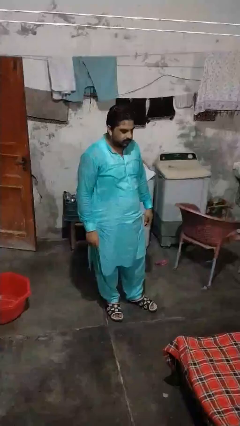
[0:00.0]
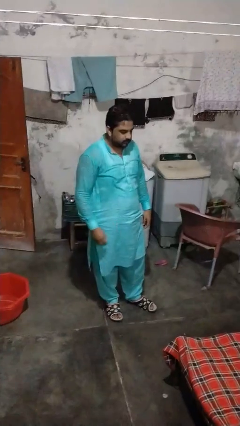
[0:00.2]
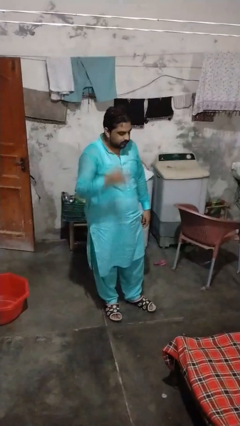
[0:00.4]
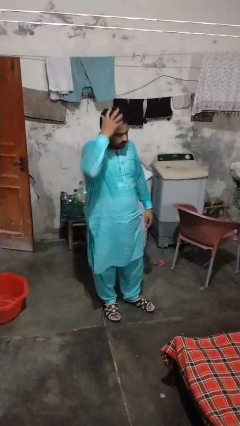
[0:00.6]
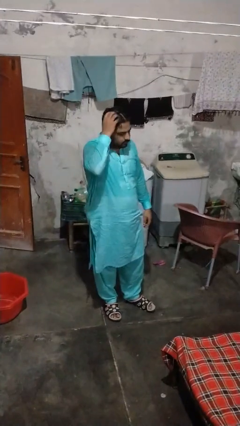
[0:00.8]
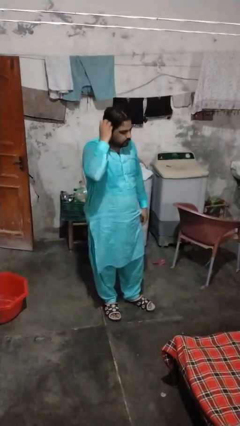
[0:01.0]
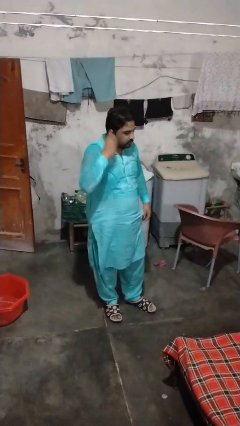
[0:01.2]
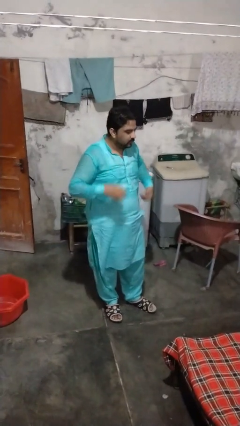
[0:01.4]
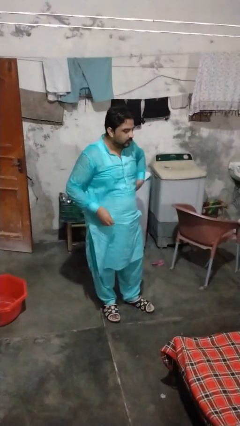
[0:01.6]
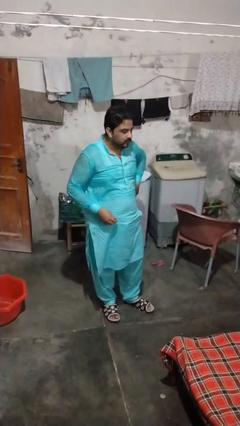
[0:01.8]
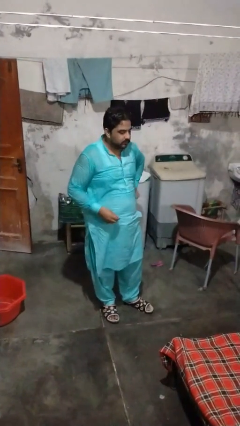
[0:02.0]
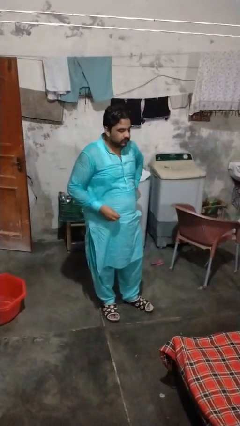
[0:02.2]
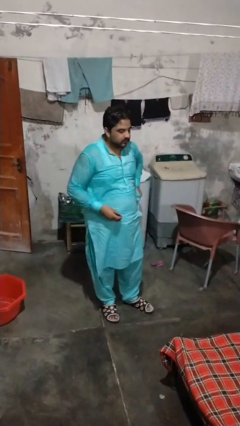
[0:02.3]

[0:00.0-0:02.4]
person takes off hairtie

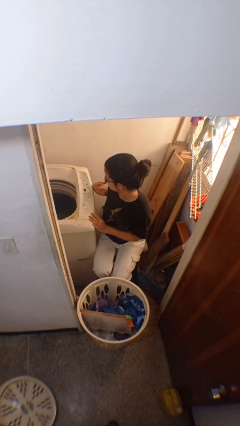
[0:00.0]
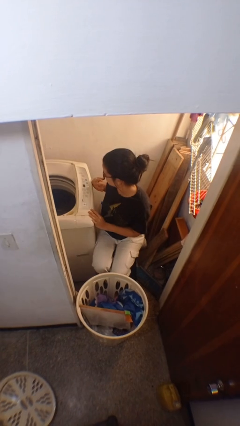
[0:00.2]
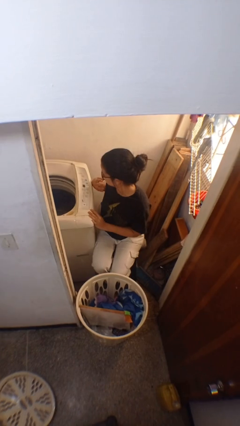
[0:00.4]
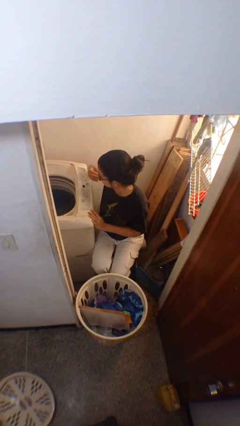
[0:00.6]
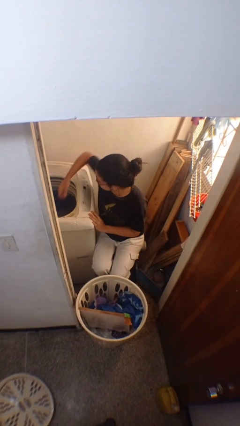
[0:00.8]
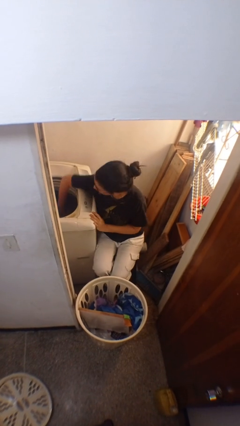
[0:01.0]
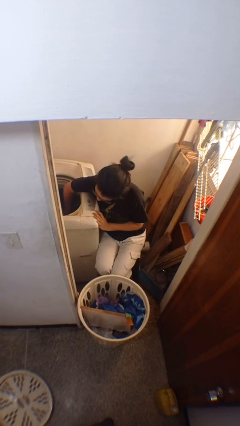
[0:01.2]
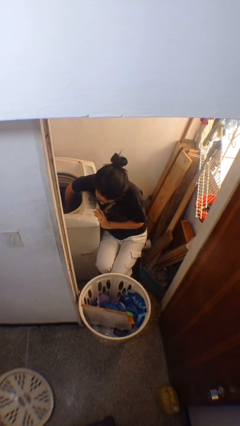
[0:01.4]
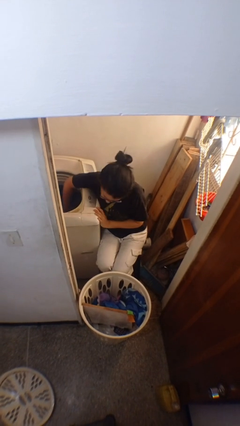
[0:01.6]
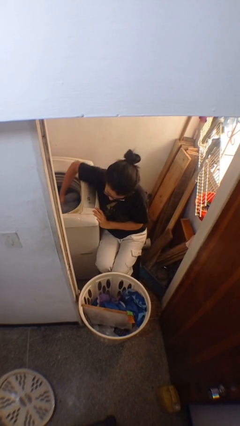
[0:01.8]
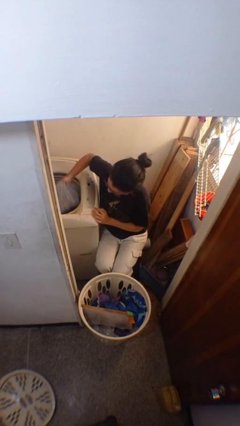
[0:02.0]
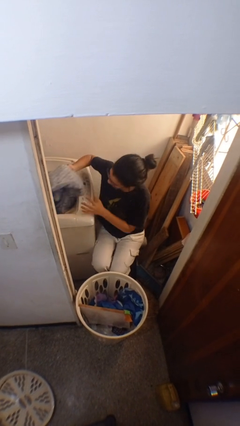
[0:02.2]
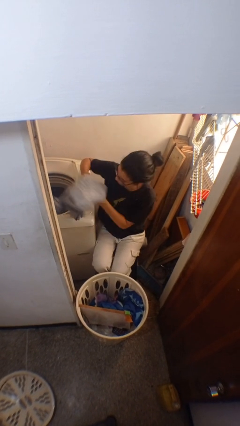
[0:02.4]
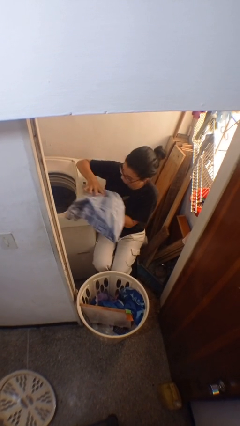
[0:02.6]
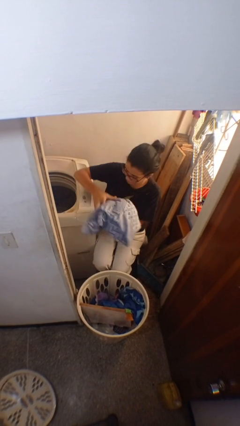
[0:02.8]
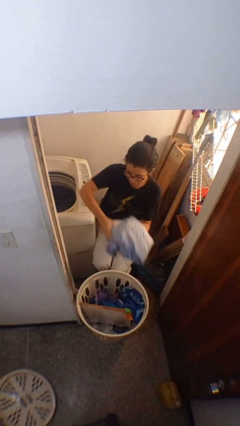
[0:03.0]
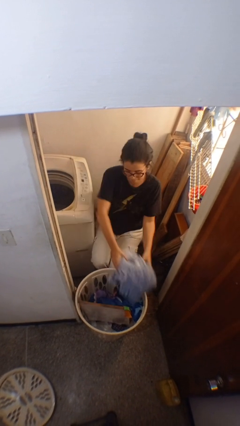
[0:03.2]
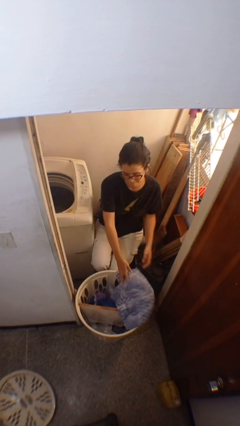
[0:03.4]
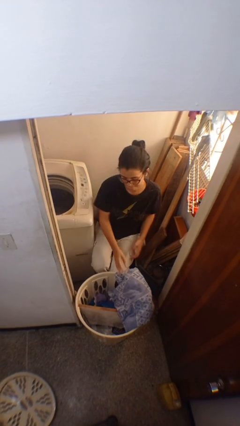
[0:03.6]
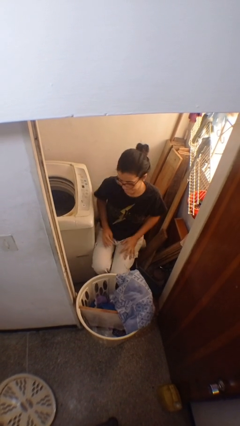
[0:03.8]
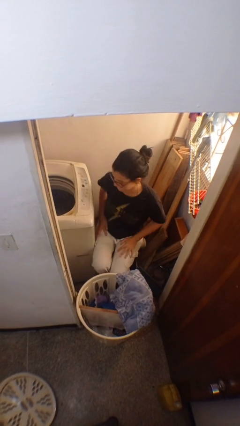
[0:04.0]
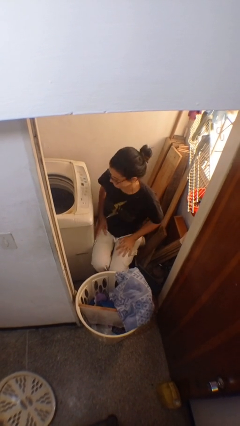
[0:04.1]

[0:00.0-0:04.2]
person unloads clotheswasher

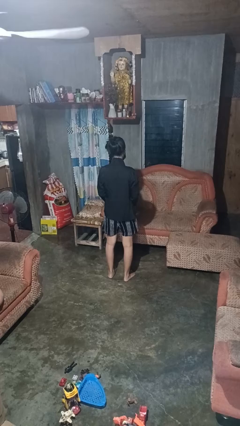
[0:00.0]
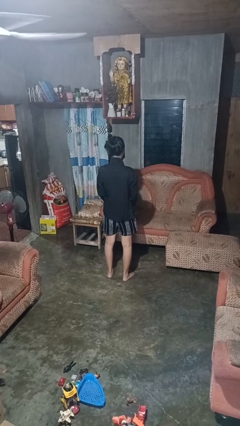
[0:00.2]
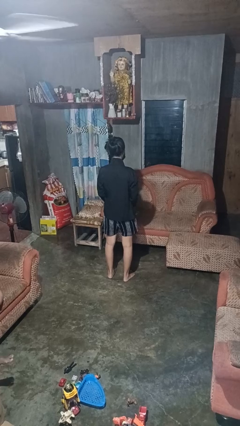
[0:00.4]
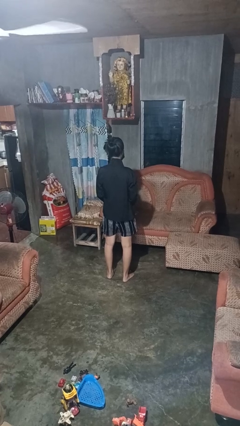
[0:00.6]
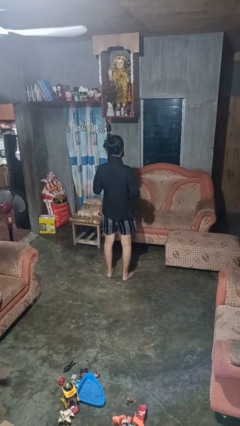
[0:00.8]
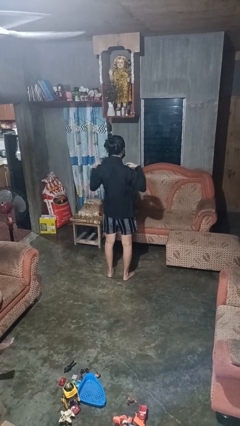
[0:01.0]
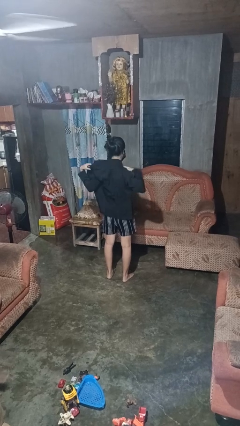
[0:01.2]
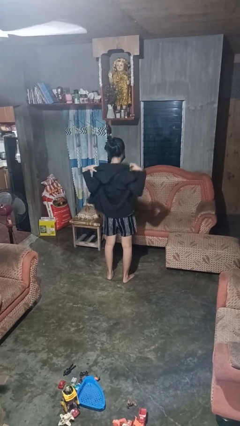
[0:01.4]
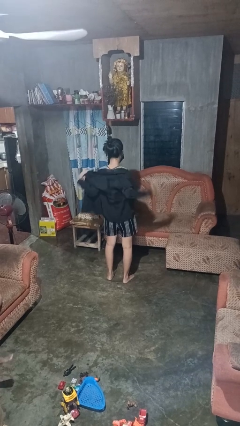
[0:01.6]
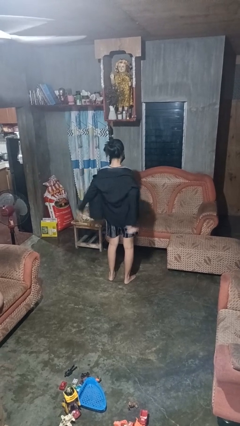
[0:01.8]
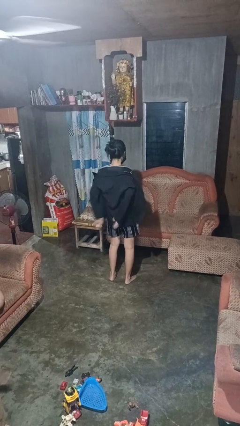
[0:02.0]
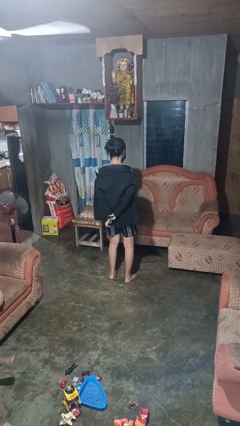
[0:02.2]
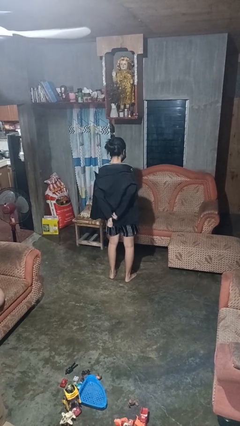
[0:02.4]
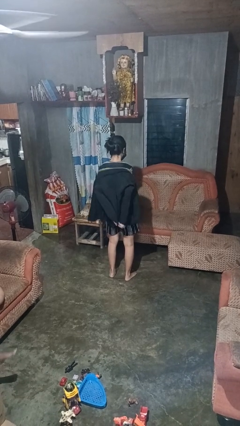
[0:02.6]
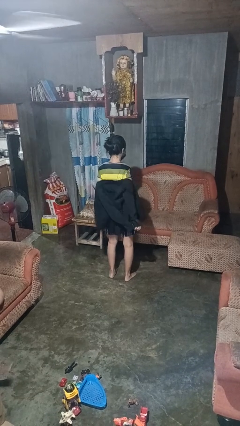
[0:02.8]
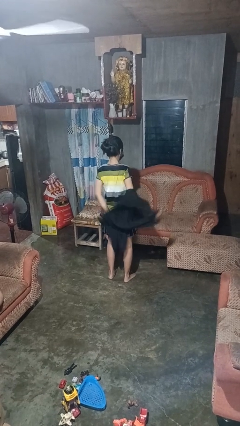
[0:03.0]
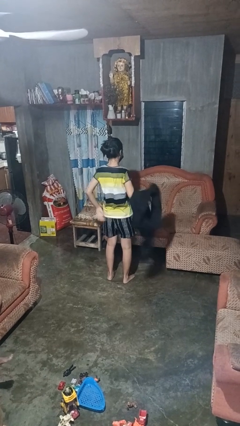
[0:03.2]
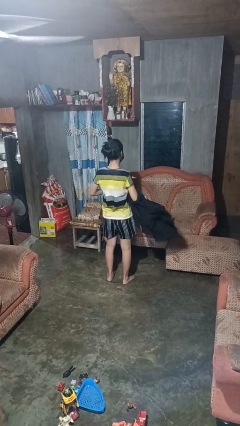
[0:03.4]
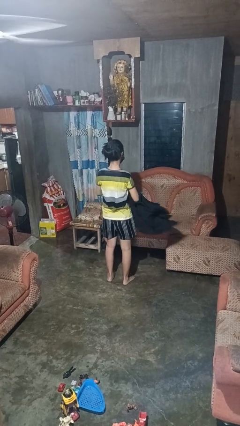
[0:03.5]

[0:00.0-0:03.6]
person takes off shirt

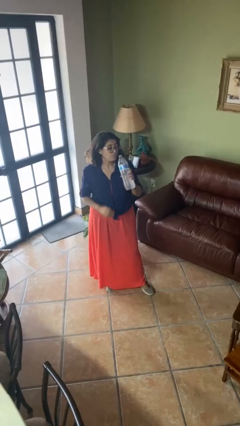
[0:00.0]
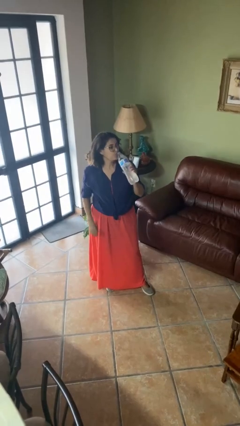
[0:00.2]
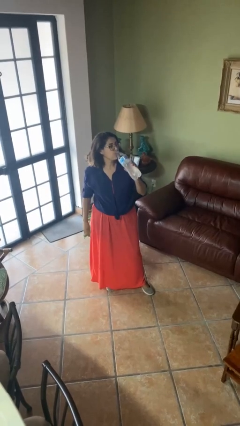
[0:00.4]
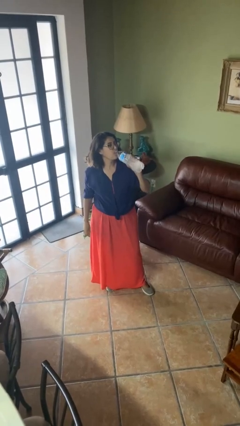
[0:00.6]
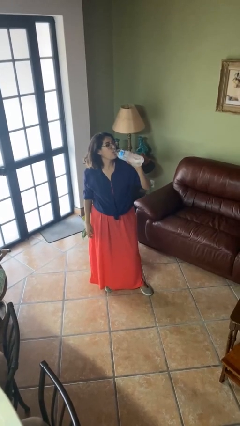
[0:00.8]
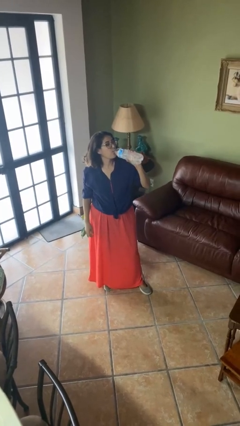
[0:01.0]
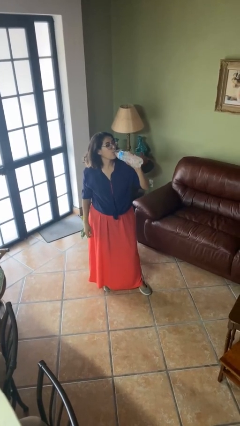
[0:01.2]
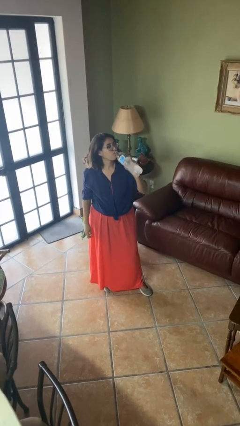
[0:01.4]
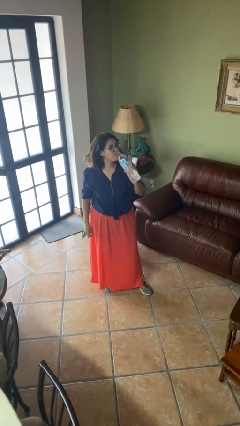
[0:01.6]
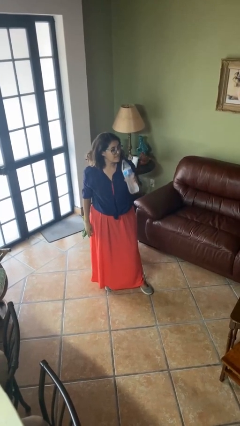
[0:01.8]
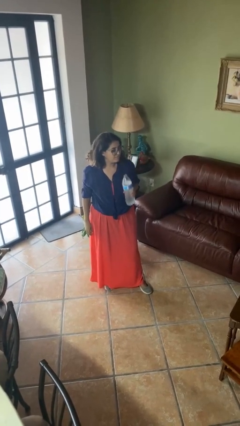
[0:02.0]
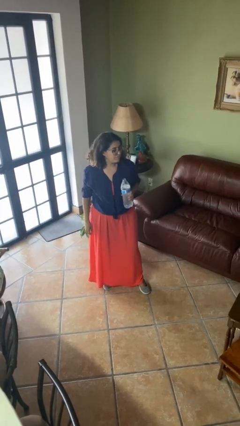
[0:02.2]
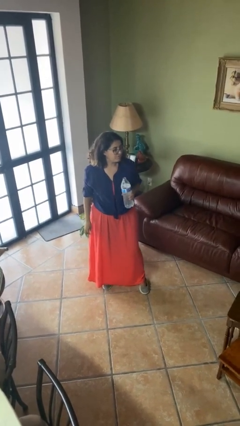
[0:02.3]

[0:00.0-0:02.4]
person drinks from bottle

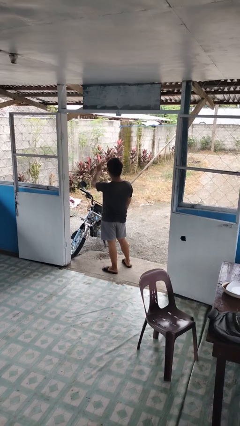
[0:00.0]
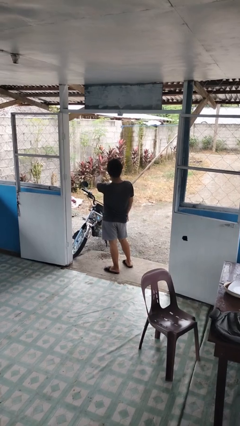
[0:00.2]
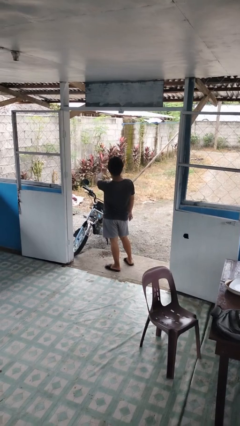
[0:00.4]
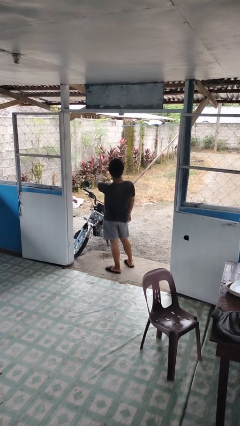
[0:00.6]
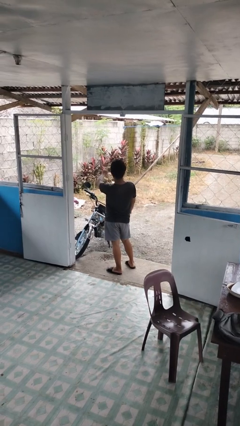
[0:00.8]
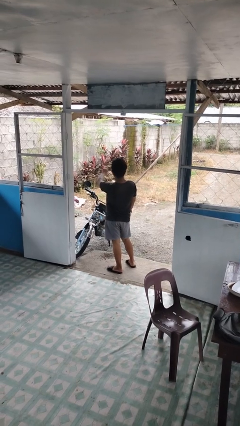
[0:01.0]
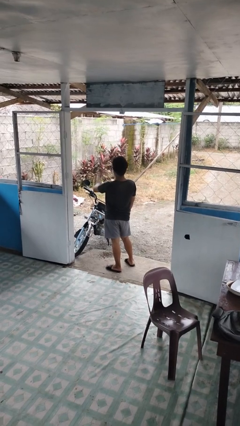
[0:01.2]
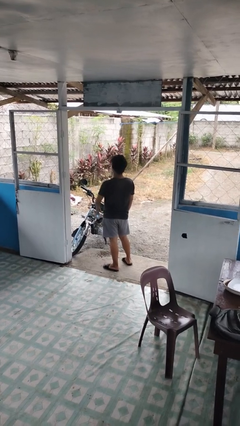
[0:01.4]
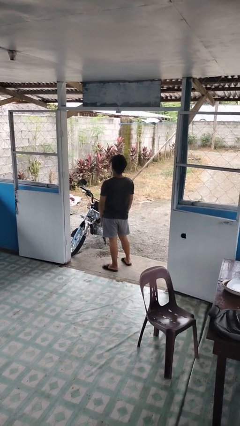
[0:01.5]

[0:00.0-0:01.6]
person gestures thumbs down

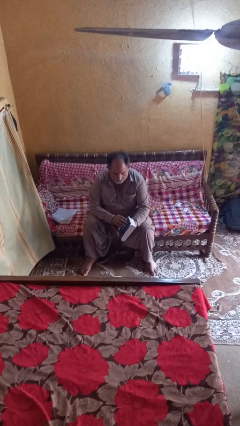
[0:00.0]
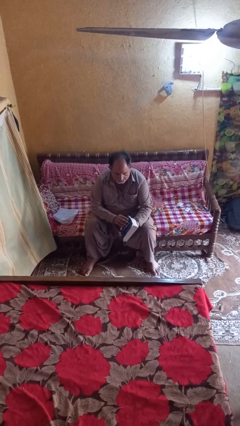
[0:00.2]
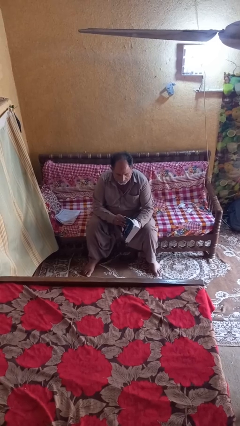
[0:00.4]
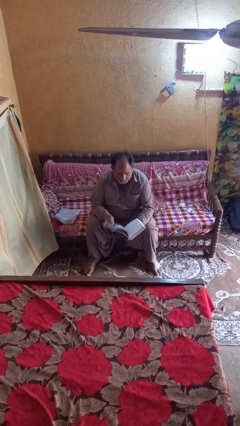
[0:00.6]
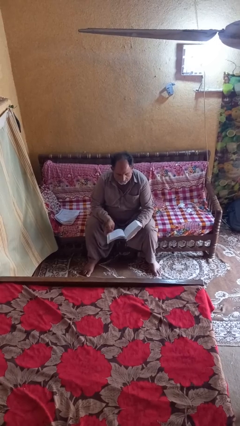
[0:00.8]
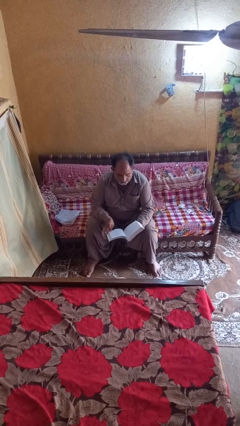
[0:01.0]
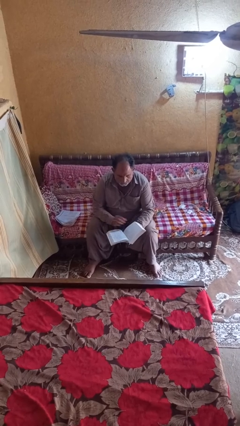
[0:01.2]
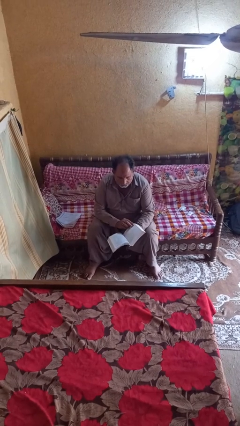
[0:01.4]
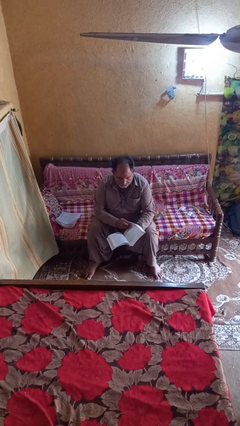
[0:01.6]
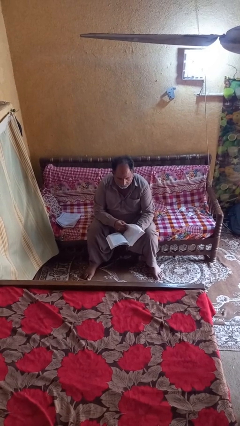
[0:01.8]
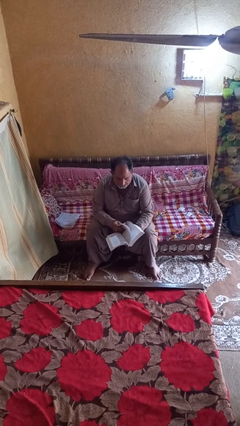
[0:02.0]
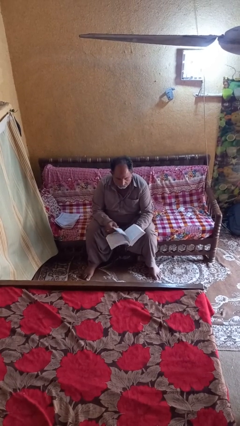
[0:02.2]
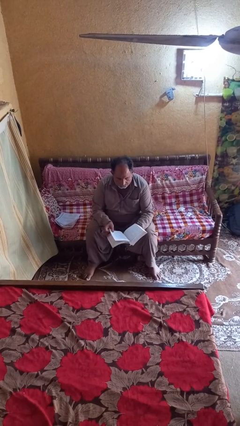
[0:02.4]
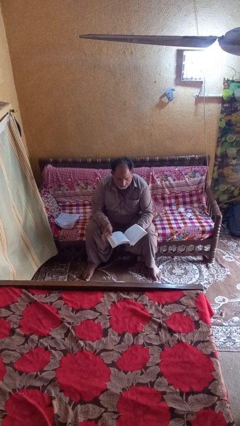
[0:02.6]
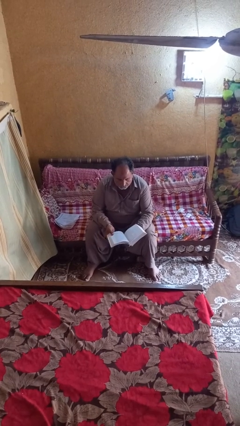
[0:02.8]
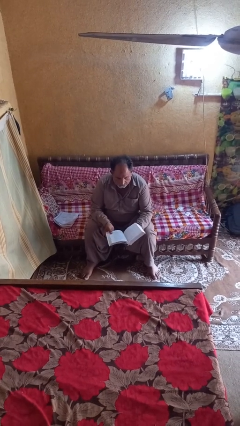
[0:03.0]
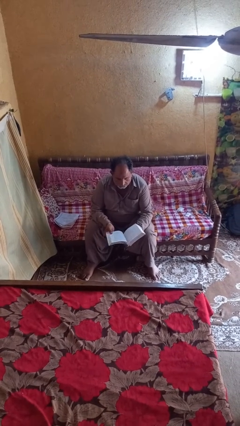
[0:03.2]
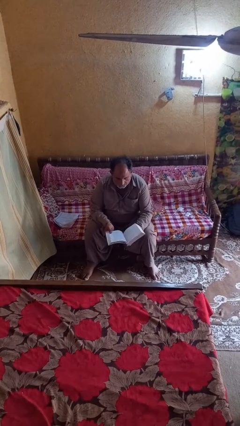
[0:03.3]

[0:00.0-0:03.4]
person reads book

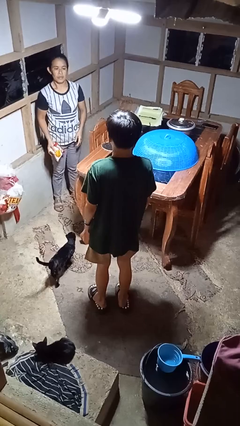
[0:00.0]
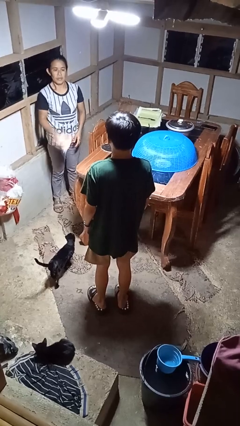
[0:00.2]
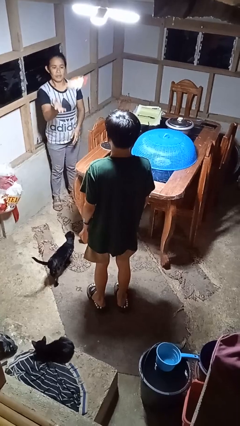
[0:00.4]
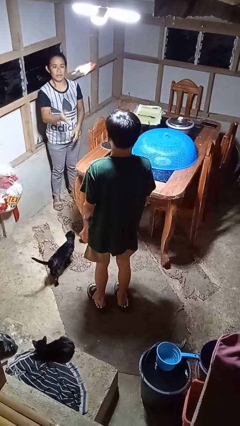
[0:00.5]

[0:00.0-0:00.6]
person catches object from person
